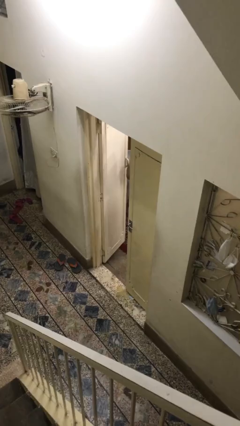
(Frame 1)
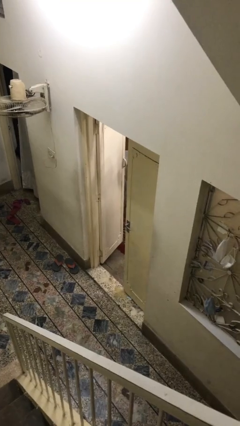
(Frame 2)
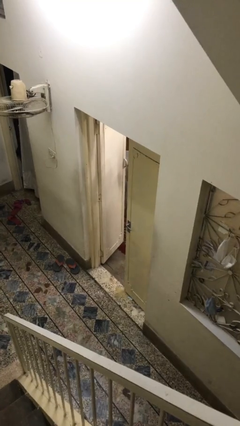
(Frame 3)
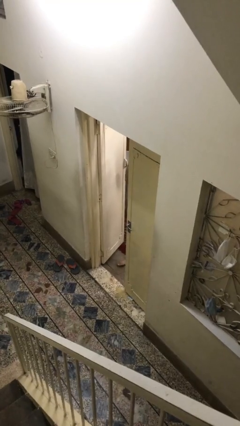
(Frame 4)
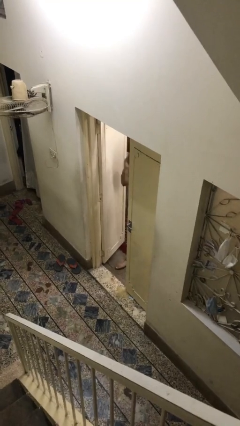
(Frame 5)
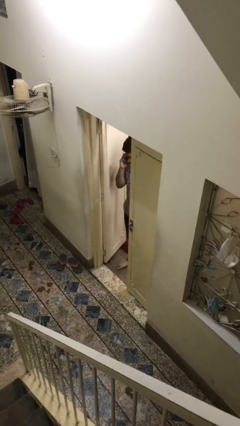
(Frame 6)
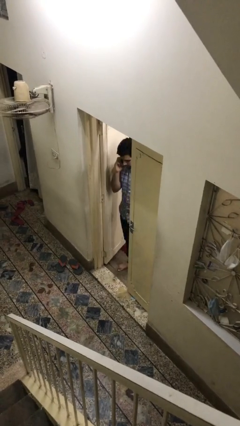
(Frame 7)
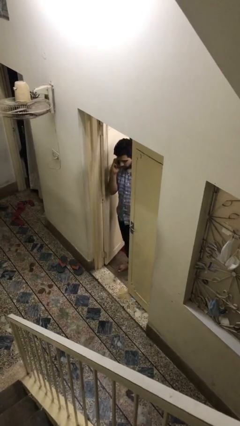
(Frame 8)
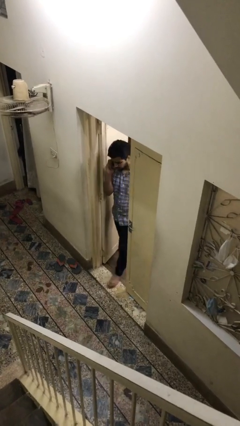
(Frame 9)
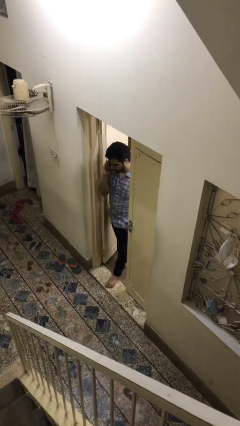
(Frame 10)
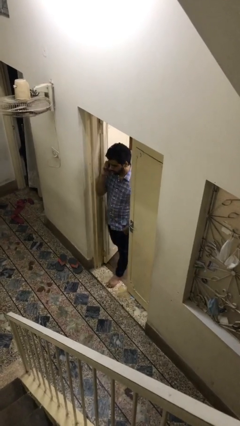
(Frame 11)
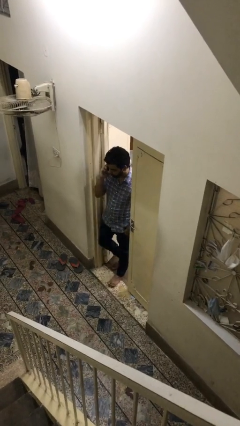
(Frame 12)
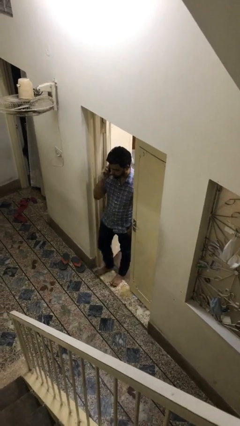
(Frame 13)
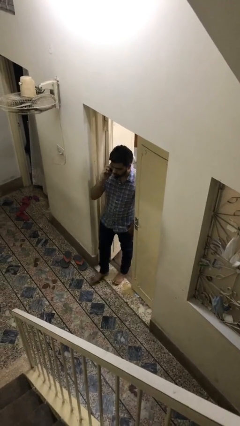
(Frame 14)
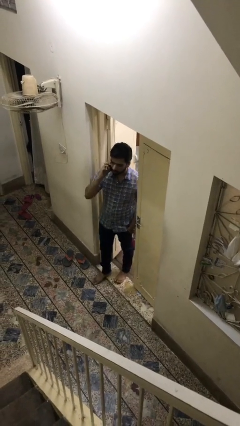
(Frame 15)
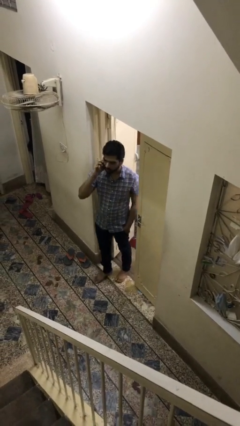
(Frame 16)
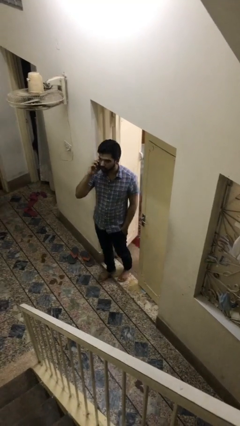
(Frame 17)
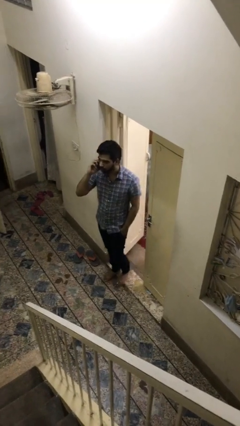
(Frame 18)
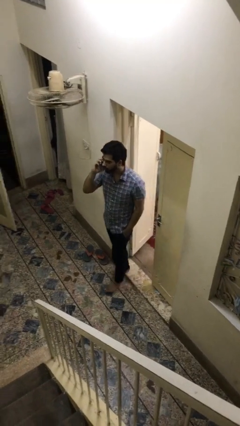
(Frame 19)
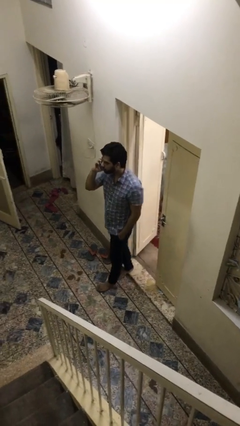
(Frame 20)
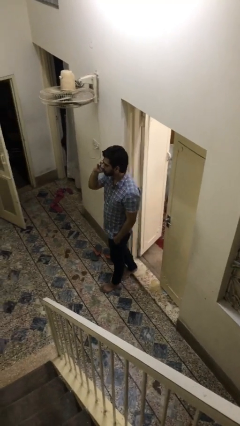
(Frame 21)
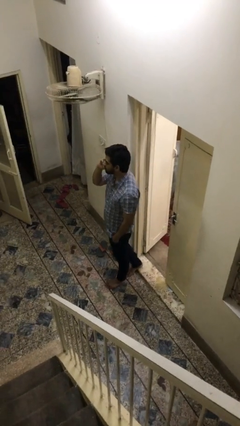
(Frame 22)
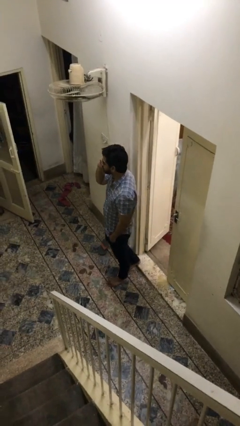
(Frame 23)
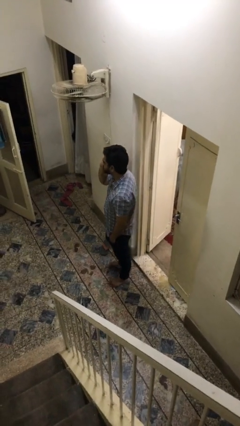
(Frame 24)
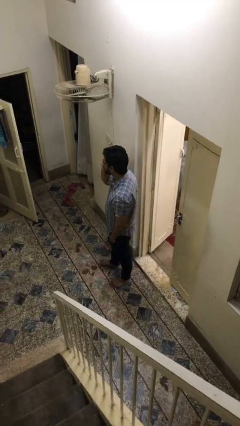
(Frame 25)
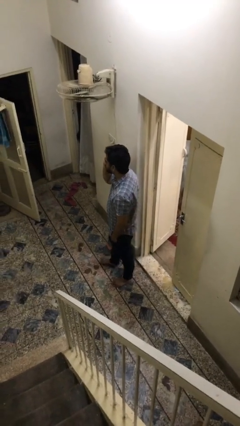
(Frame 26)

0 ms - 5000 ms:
person enters scene through structure

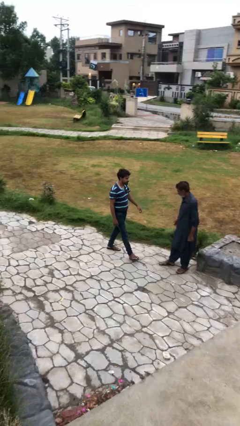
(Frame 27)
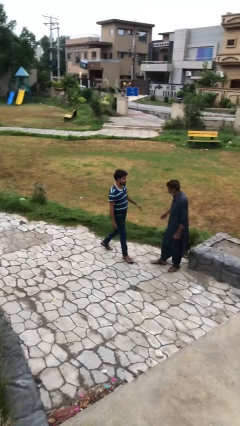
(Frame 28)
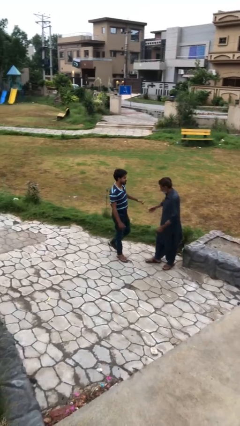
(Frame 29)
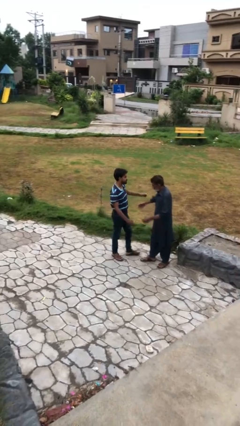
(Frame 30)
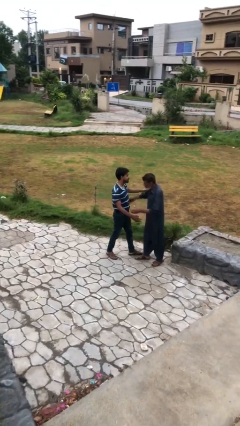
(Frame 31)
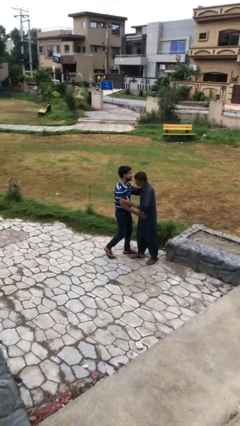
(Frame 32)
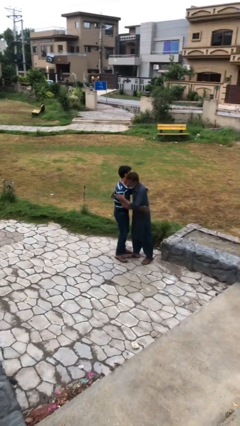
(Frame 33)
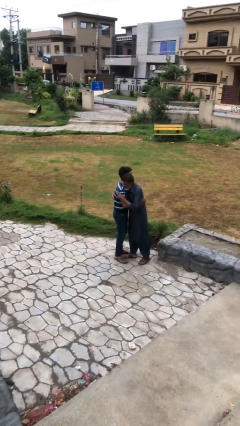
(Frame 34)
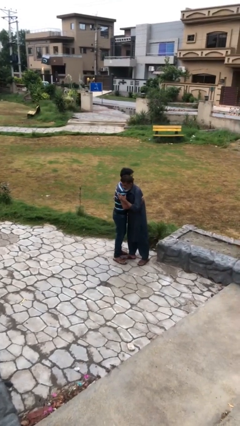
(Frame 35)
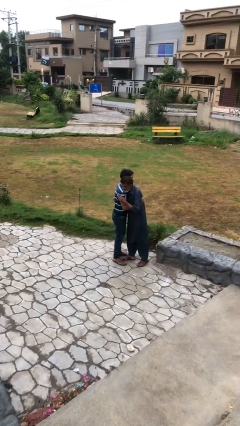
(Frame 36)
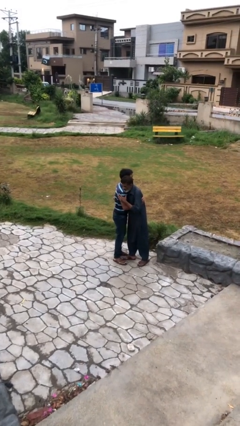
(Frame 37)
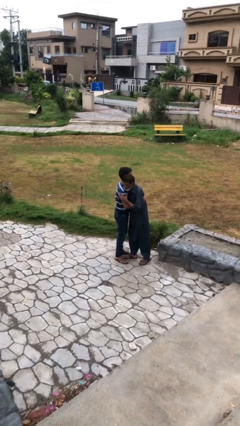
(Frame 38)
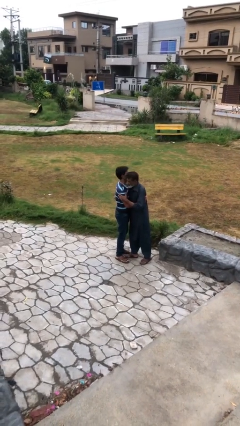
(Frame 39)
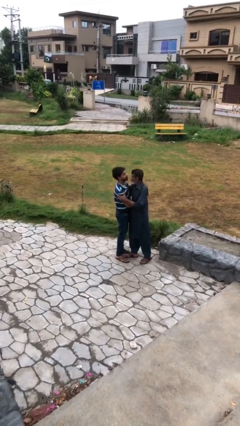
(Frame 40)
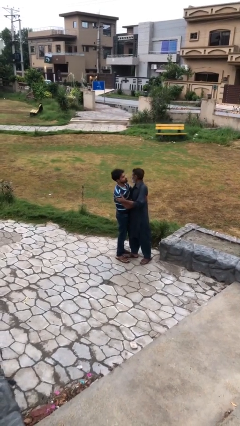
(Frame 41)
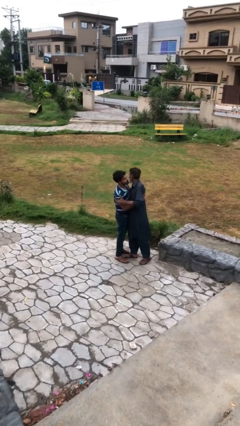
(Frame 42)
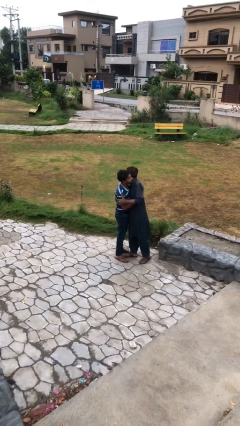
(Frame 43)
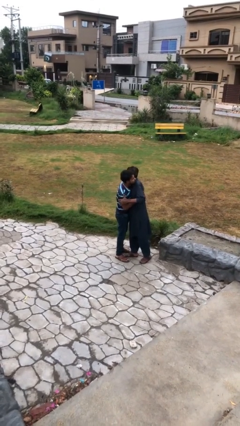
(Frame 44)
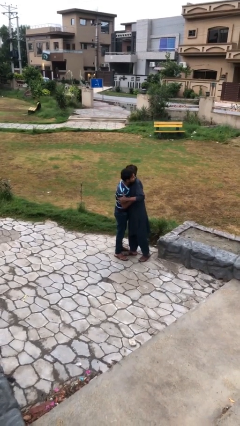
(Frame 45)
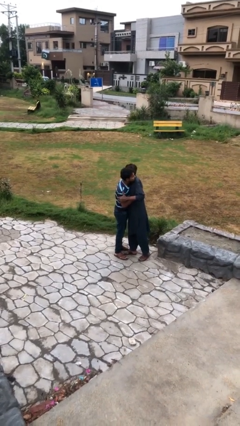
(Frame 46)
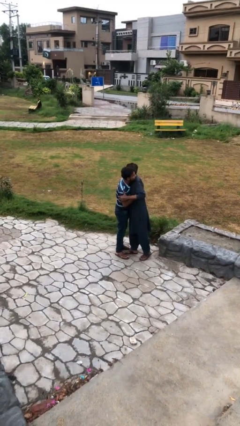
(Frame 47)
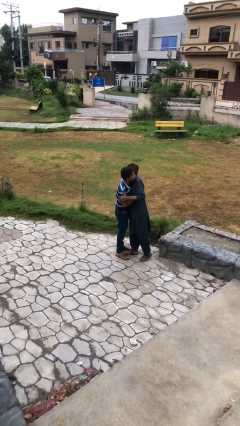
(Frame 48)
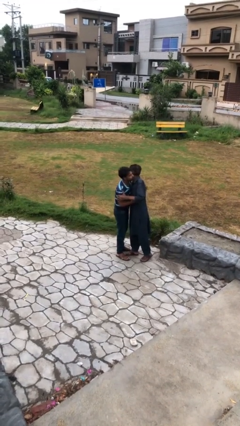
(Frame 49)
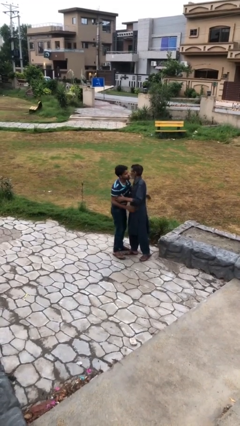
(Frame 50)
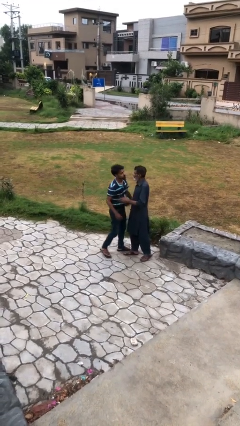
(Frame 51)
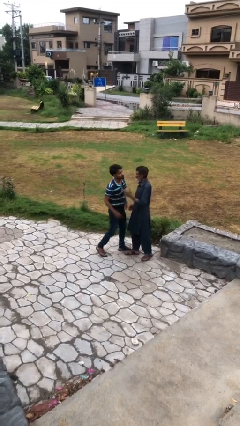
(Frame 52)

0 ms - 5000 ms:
person embraces person

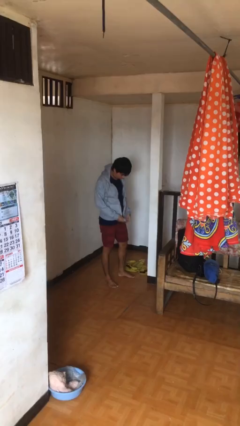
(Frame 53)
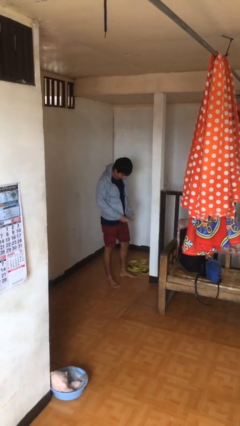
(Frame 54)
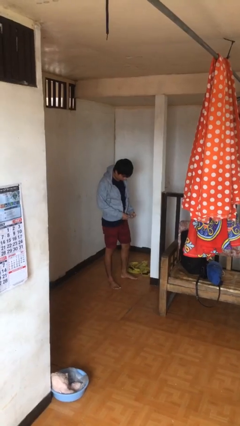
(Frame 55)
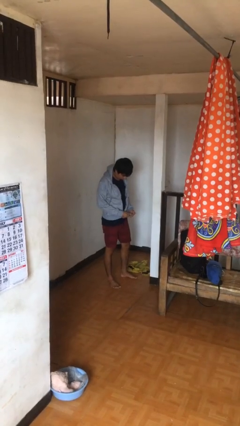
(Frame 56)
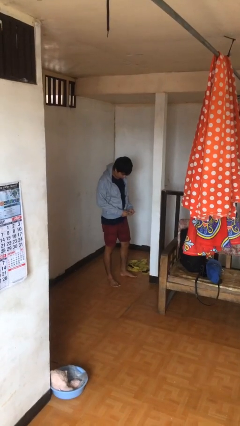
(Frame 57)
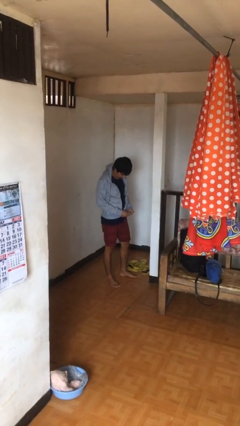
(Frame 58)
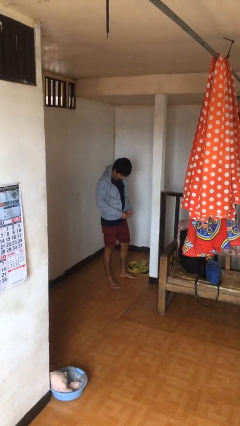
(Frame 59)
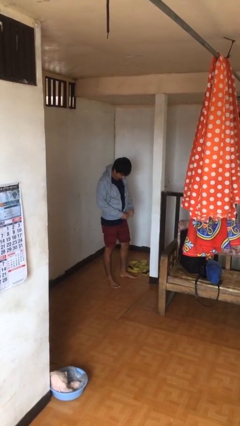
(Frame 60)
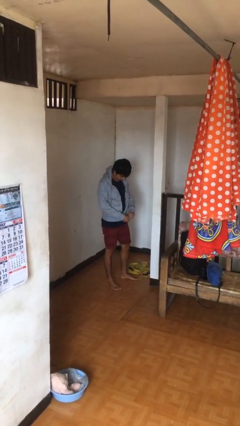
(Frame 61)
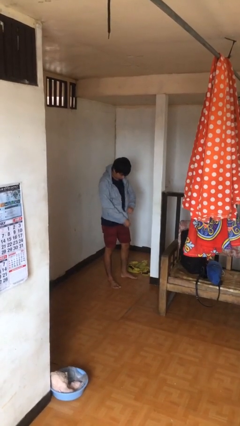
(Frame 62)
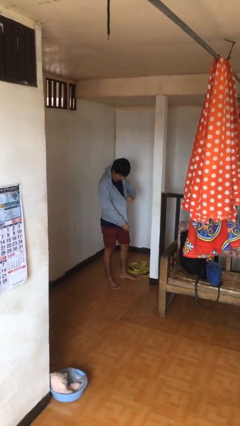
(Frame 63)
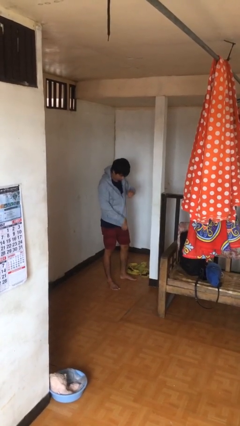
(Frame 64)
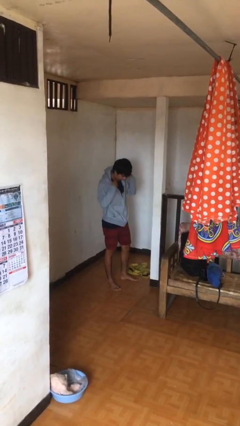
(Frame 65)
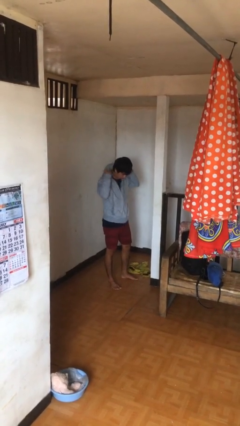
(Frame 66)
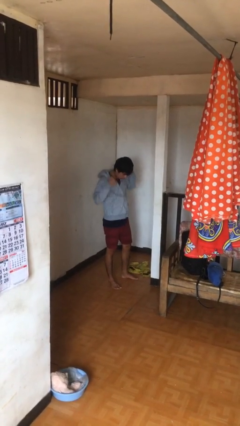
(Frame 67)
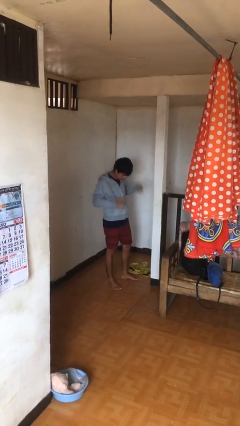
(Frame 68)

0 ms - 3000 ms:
person zips up jacket

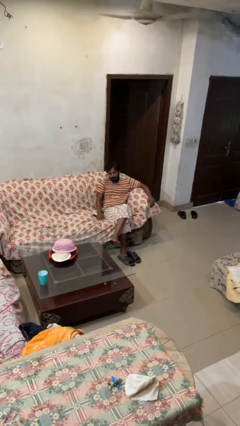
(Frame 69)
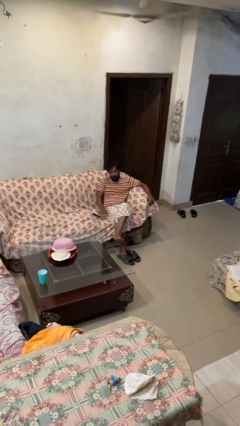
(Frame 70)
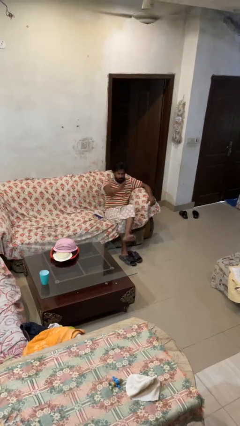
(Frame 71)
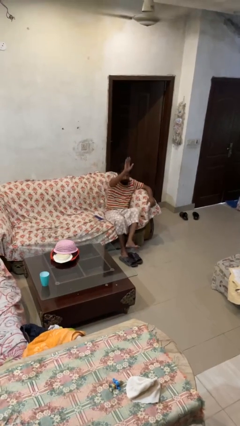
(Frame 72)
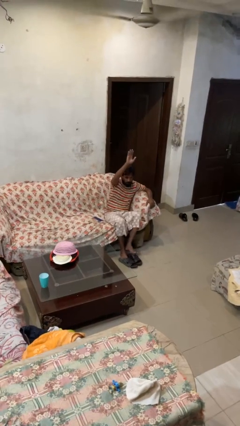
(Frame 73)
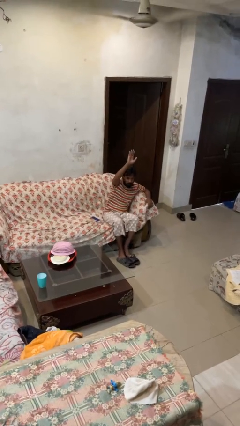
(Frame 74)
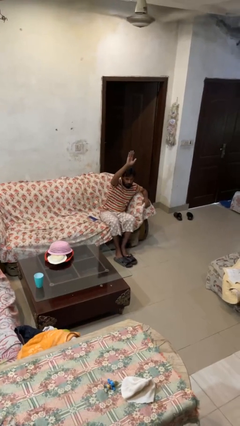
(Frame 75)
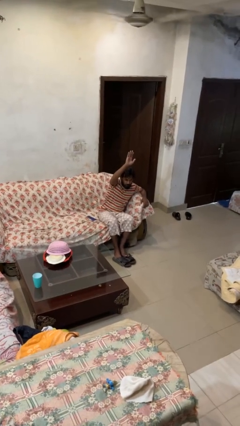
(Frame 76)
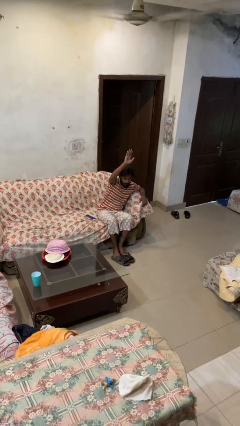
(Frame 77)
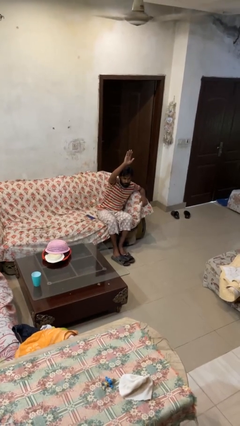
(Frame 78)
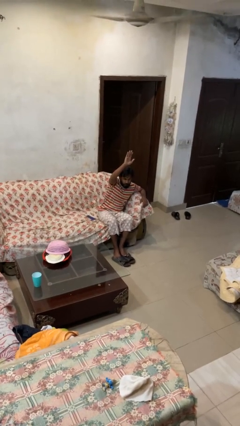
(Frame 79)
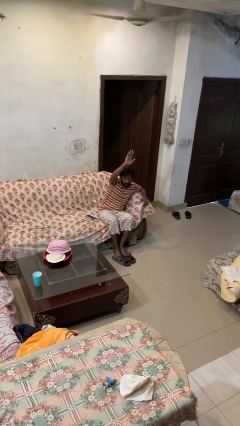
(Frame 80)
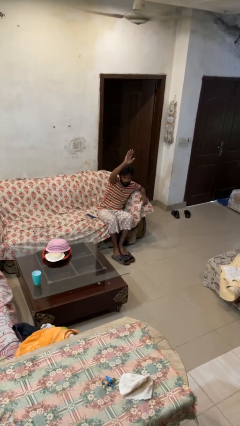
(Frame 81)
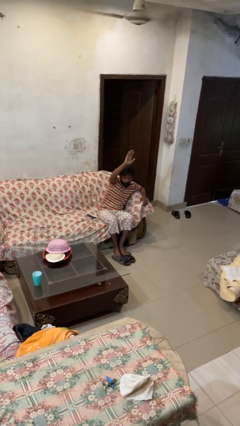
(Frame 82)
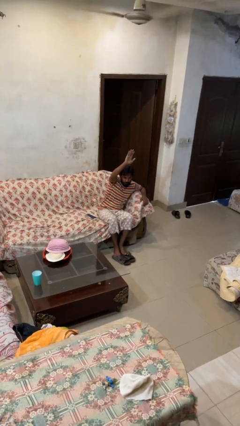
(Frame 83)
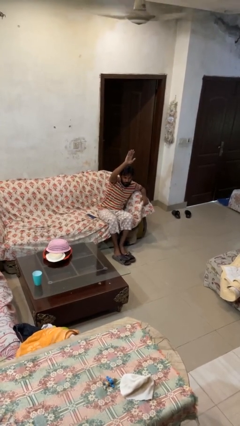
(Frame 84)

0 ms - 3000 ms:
person gestures raise hand

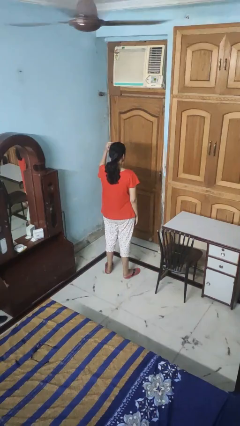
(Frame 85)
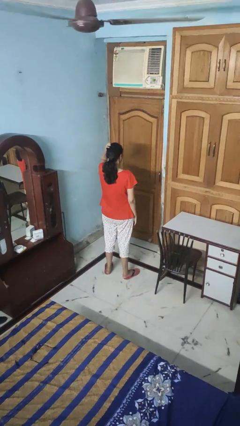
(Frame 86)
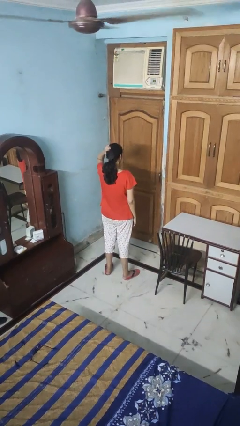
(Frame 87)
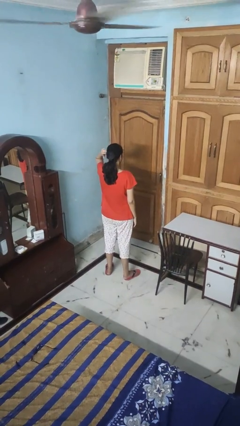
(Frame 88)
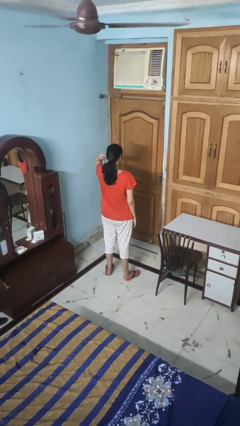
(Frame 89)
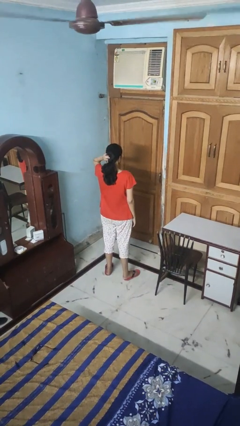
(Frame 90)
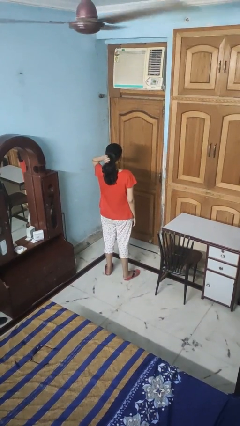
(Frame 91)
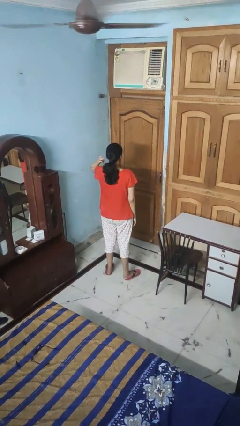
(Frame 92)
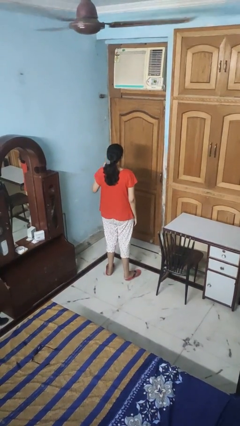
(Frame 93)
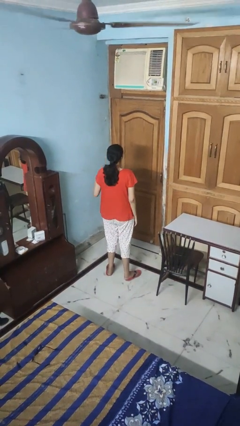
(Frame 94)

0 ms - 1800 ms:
person pats head
